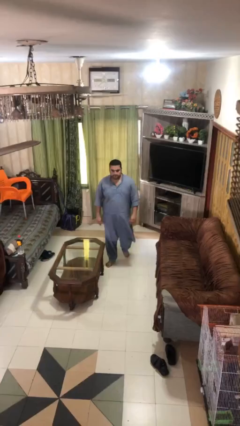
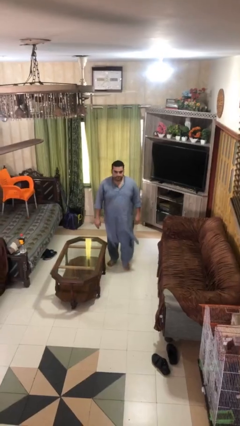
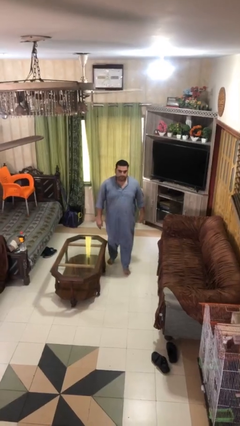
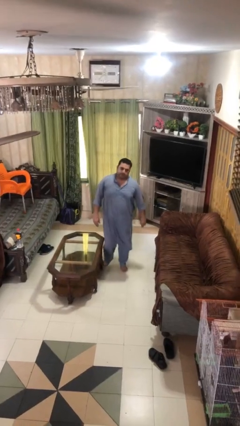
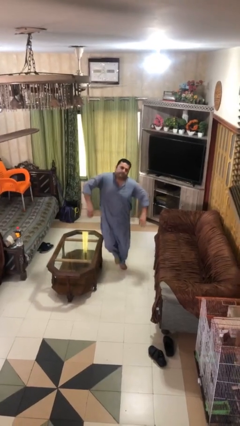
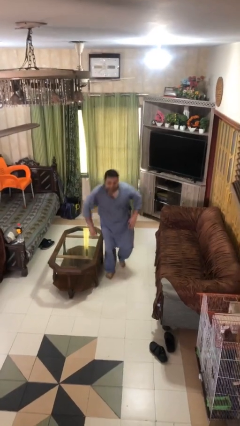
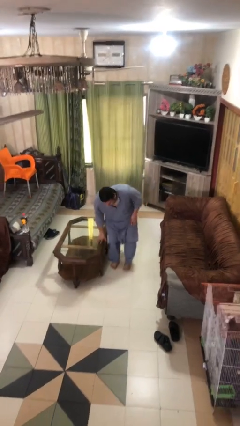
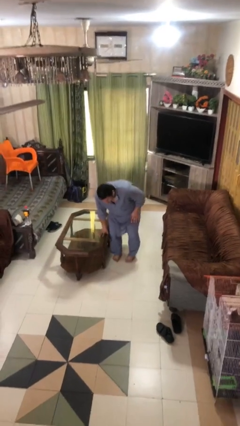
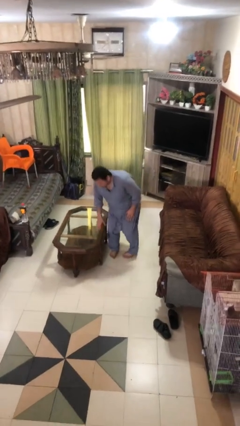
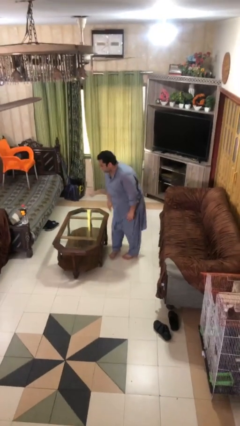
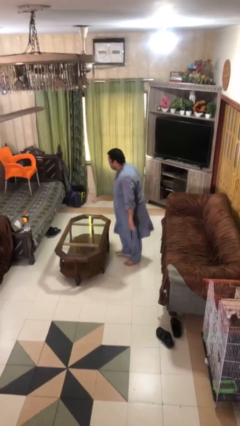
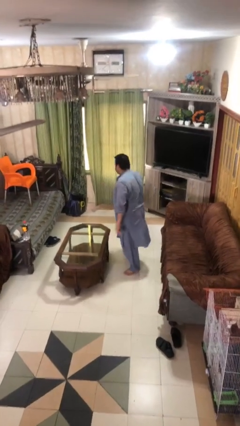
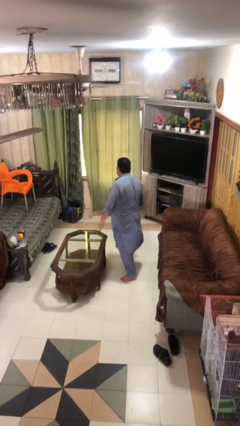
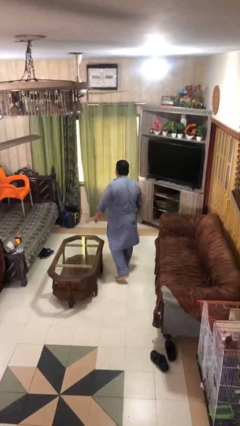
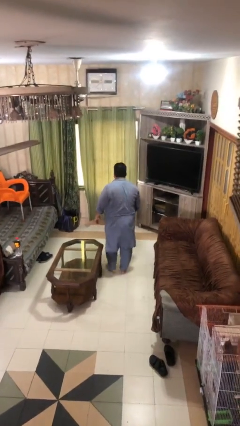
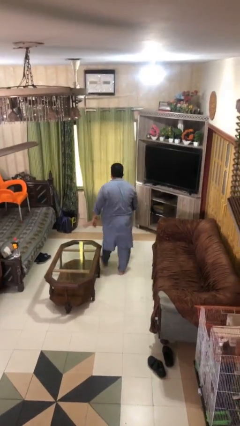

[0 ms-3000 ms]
person bumps into table

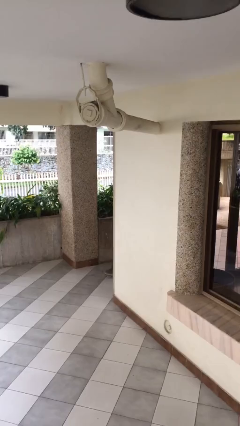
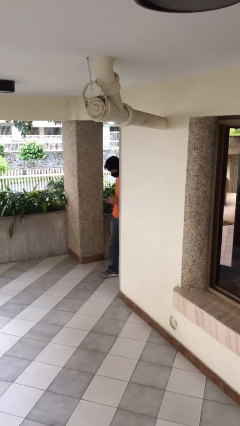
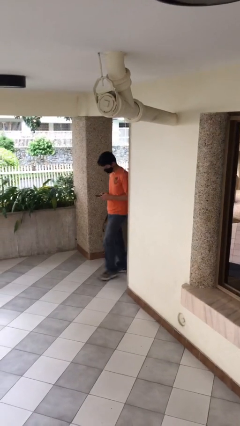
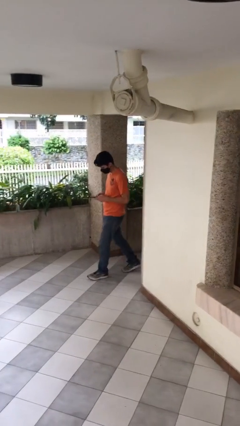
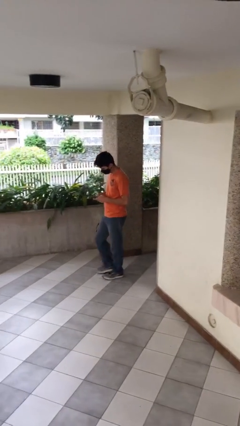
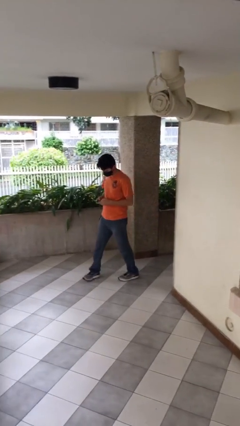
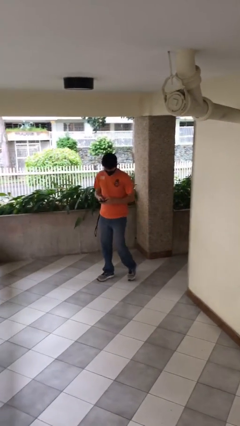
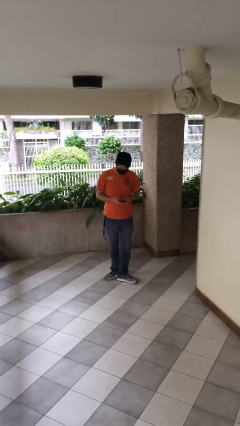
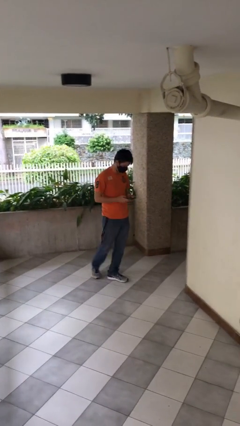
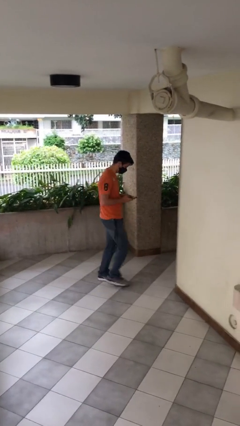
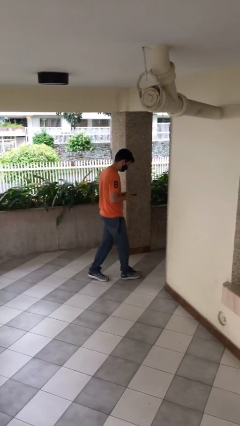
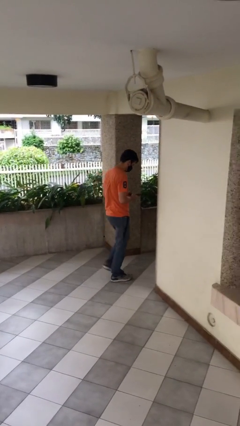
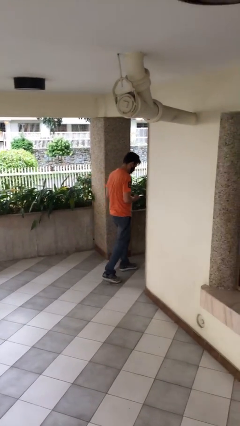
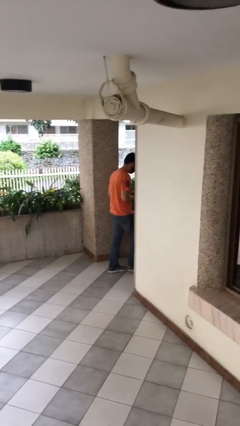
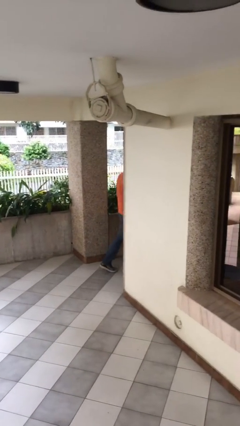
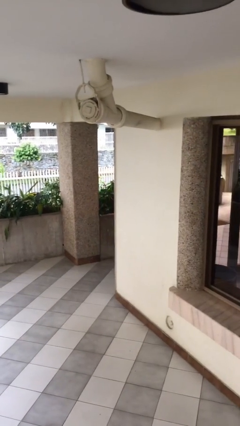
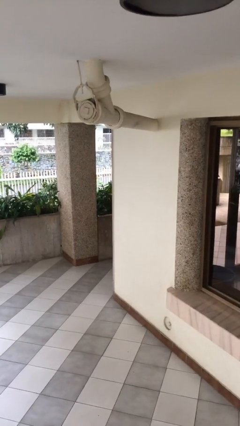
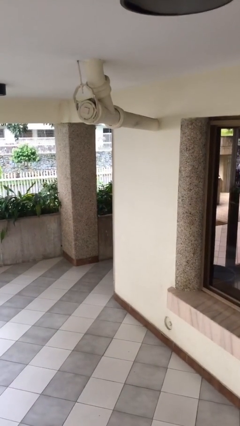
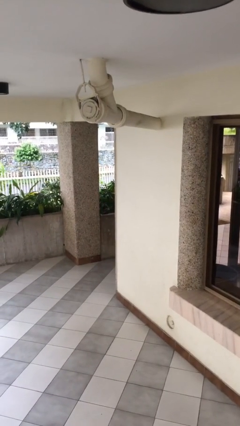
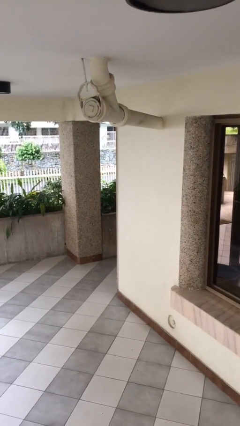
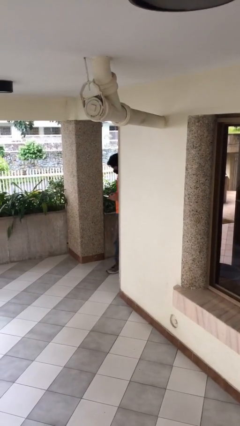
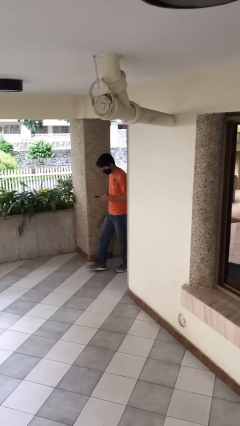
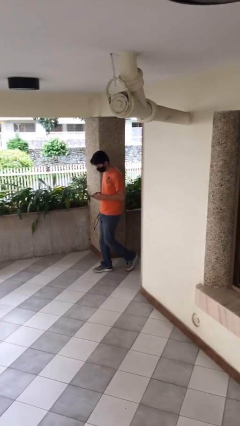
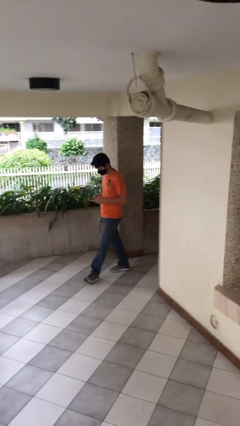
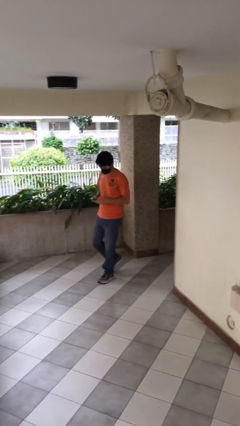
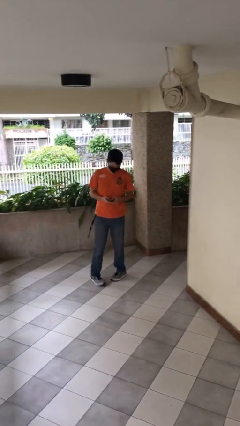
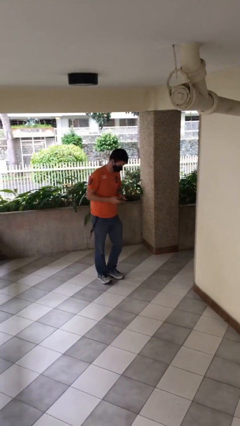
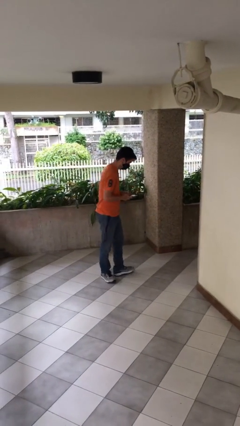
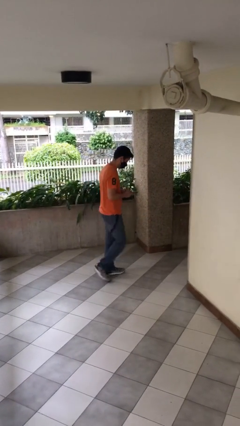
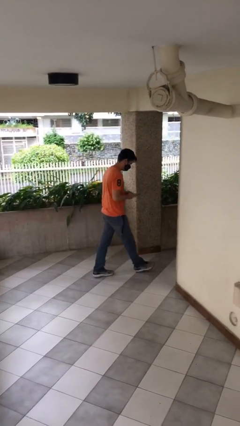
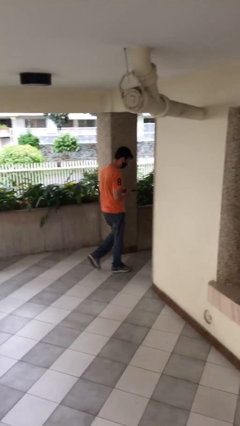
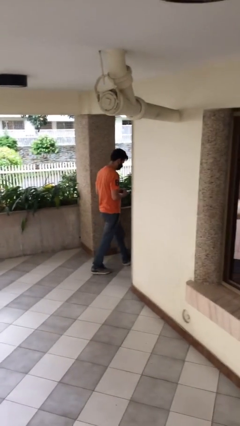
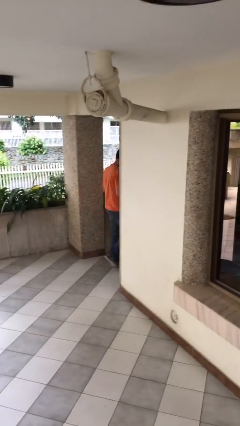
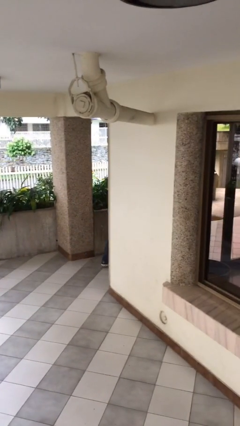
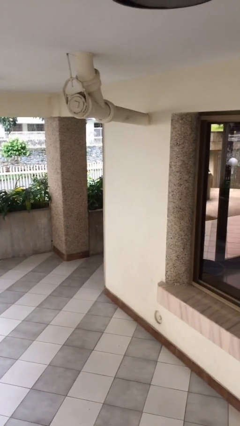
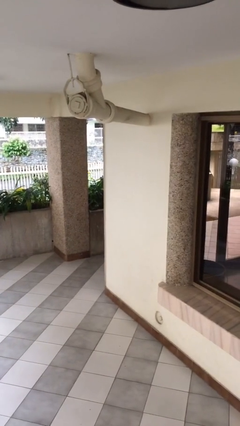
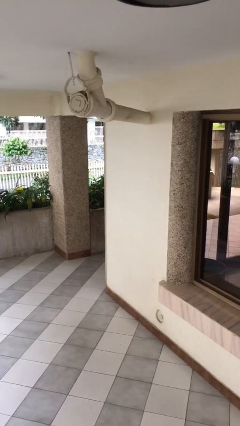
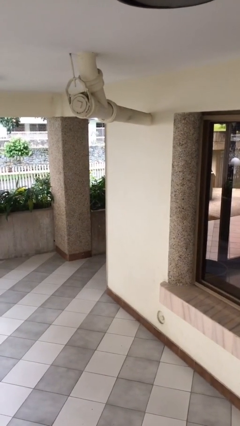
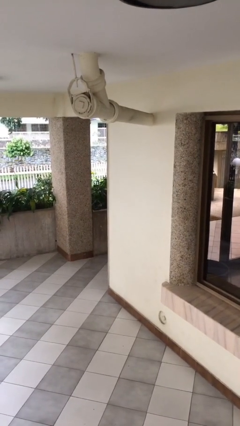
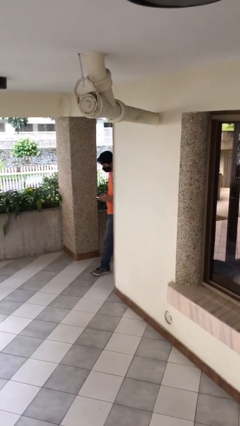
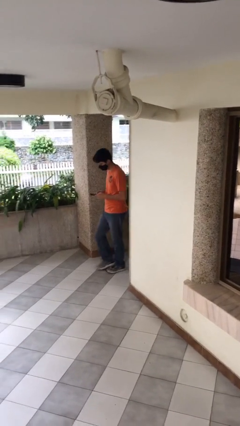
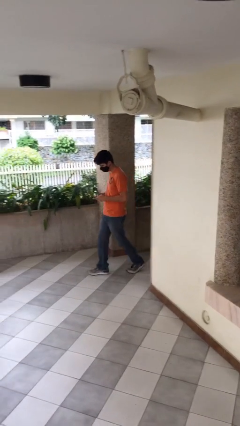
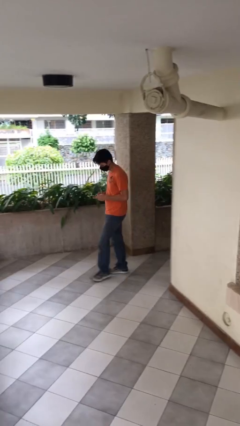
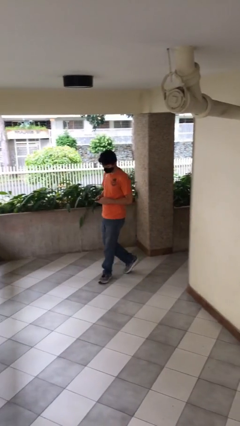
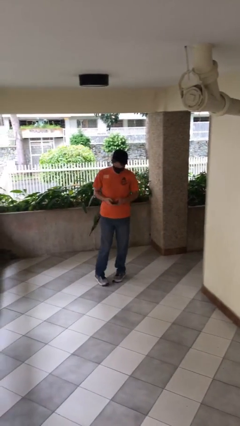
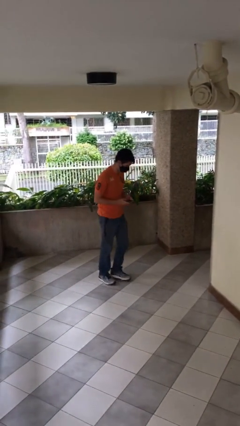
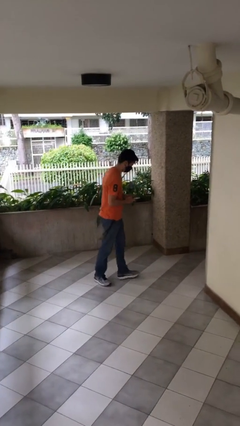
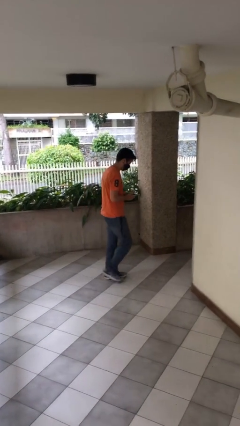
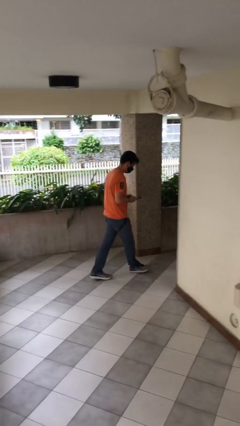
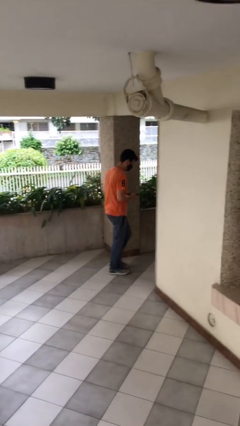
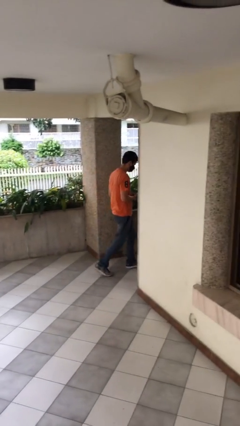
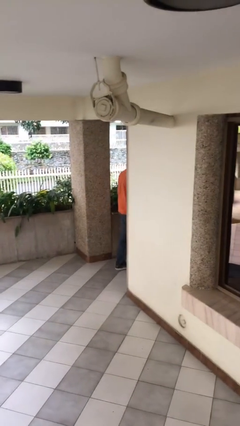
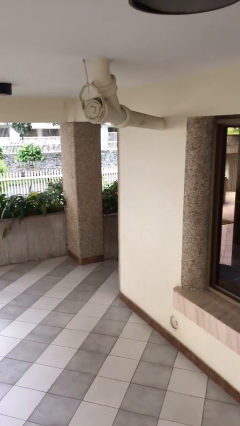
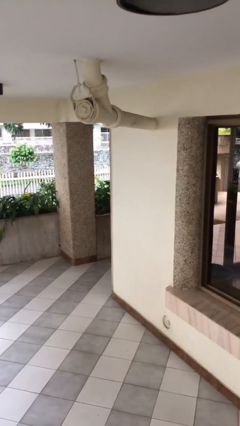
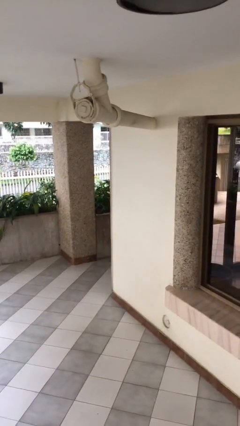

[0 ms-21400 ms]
person texts on phone

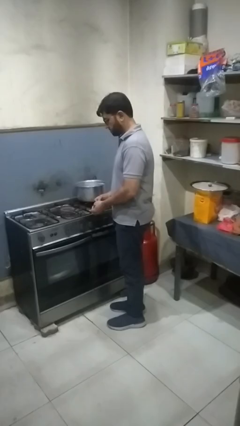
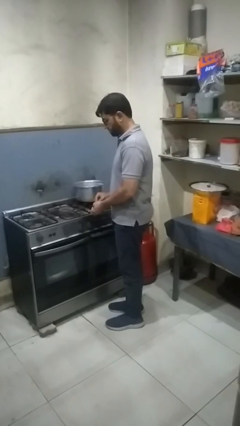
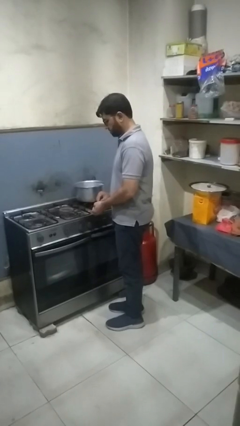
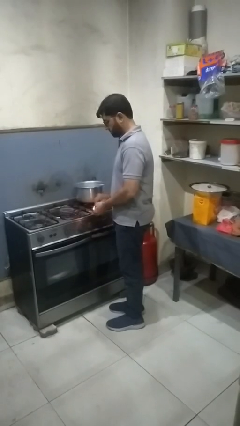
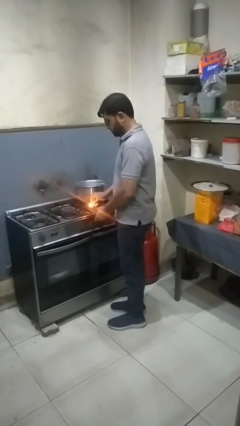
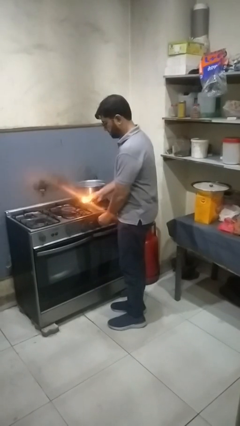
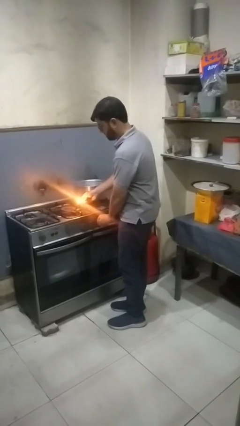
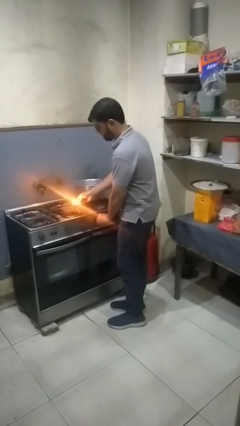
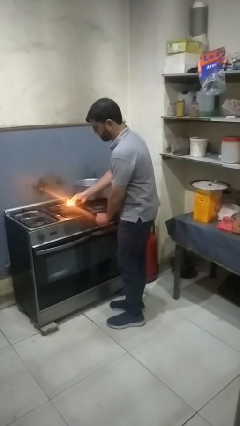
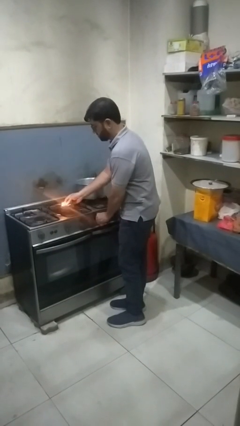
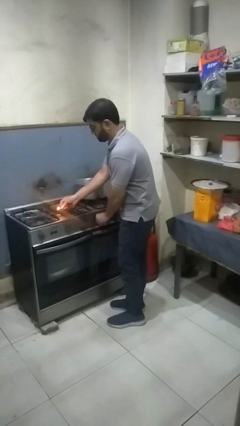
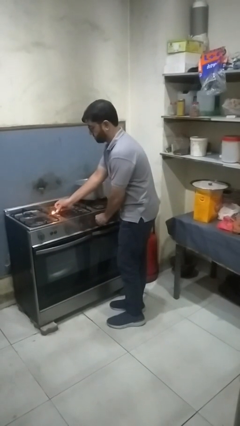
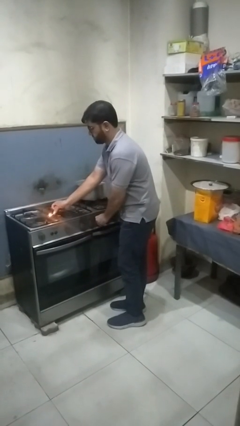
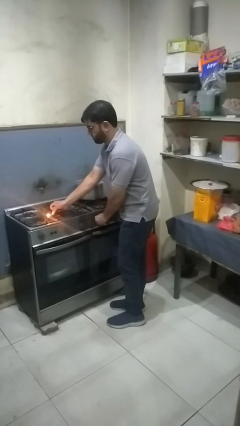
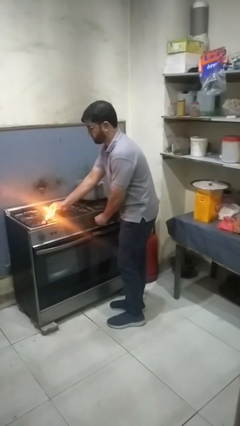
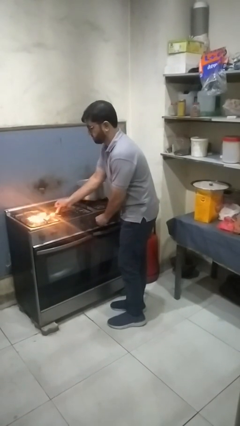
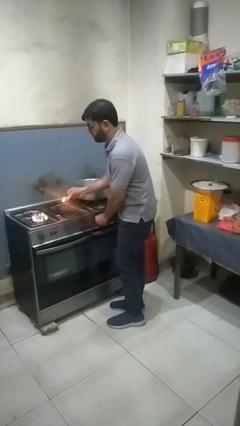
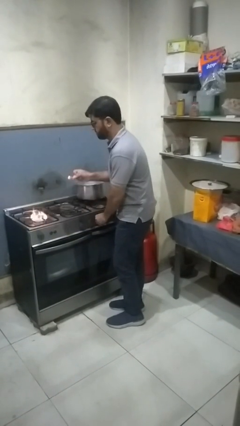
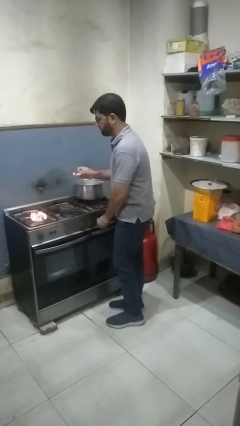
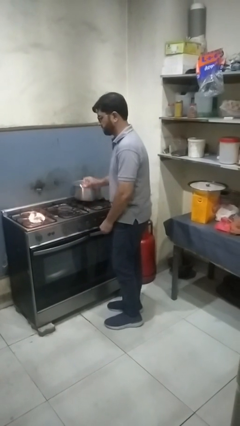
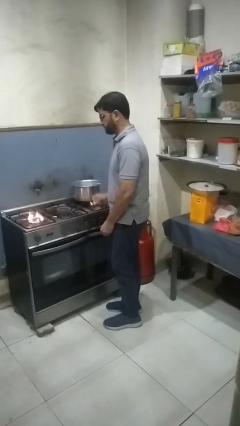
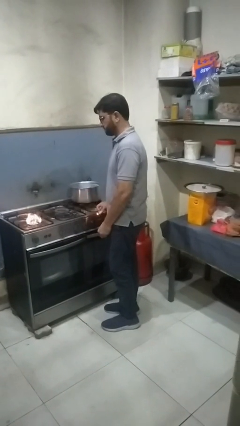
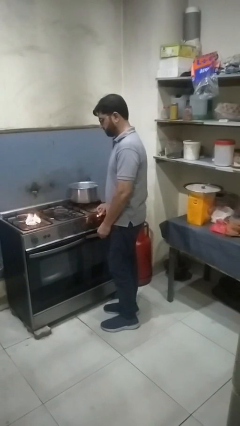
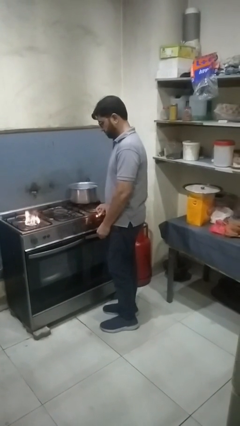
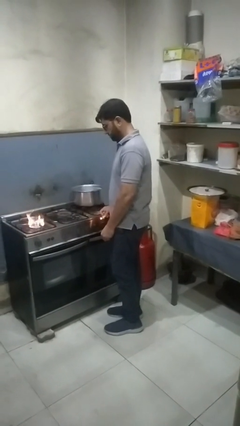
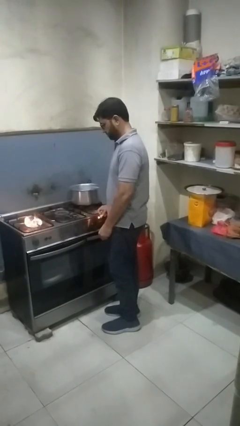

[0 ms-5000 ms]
person turns on stovetop
